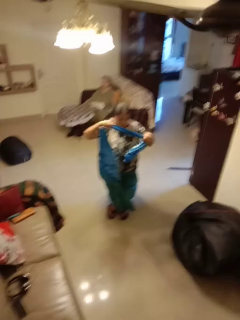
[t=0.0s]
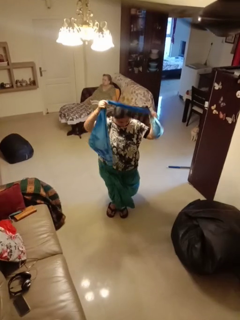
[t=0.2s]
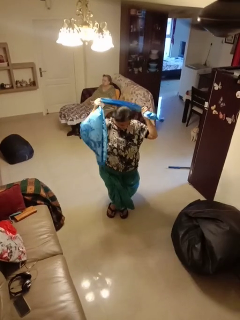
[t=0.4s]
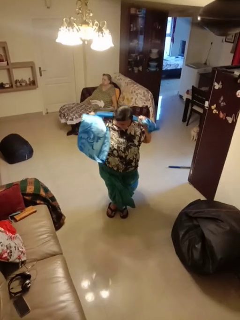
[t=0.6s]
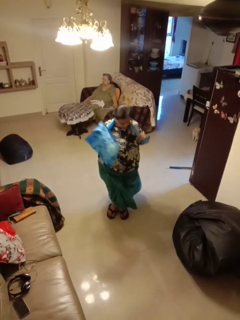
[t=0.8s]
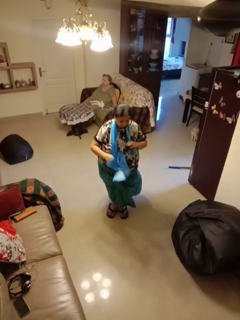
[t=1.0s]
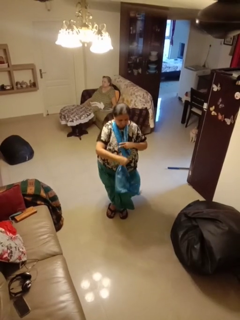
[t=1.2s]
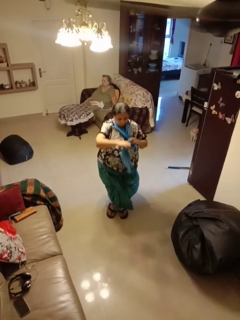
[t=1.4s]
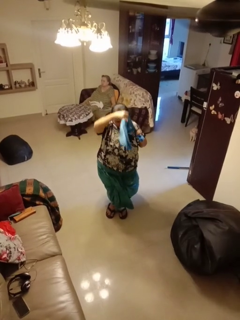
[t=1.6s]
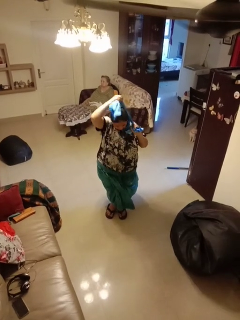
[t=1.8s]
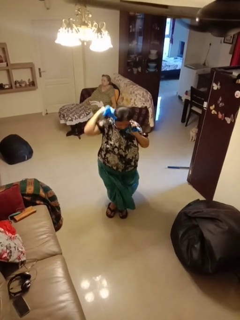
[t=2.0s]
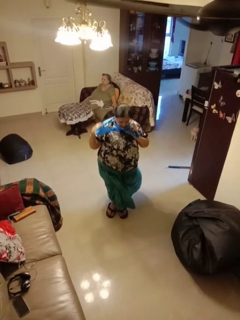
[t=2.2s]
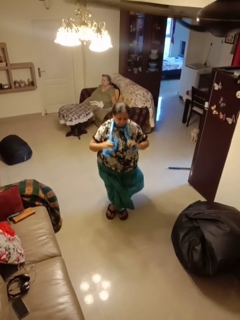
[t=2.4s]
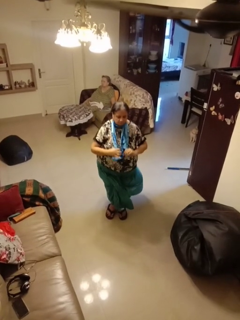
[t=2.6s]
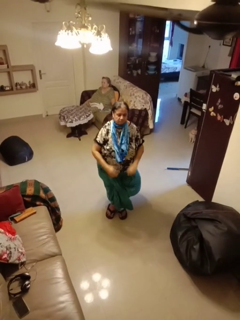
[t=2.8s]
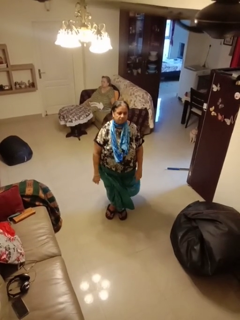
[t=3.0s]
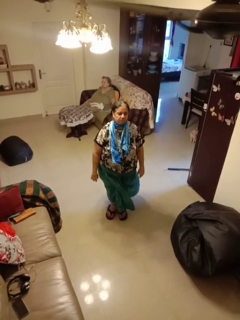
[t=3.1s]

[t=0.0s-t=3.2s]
person puts on scarf

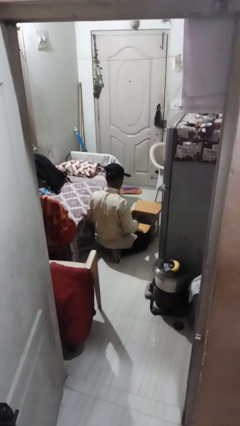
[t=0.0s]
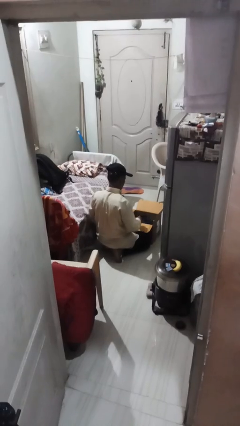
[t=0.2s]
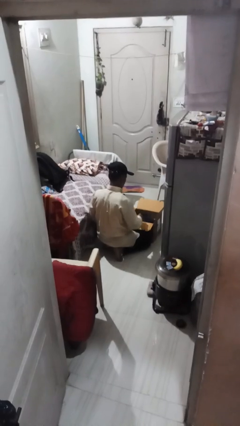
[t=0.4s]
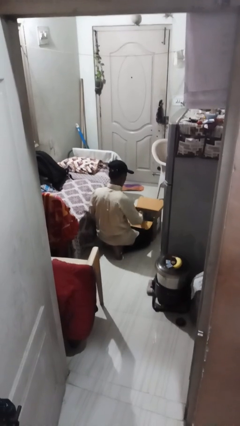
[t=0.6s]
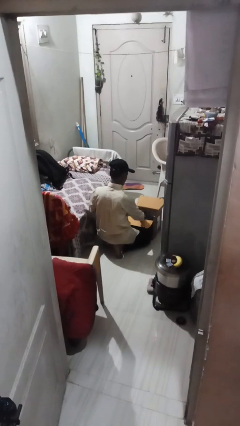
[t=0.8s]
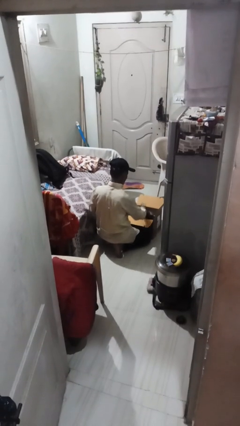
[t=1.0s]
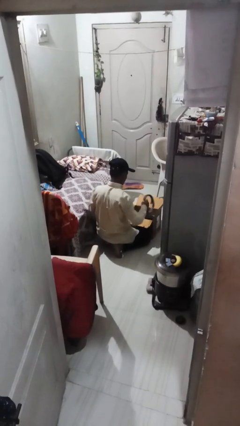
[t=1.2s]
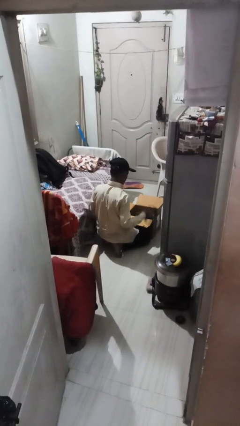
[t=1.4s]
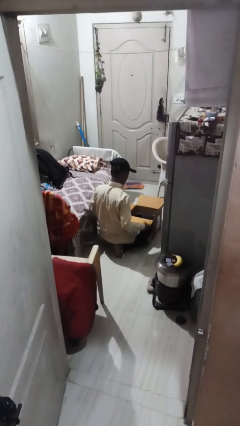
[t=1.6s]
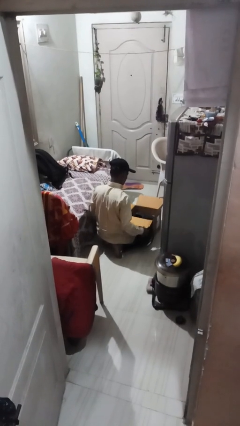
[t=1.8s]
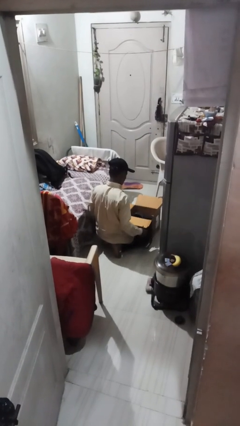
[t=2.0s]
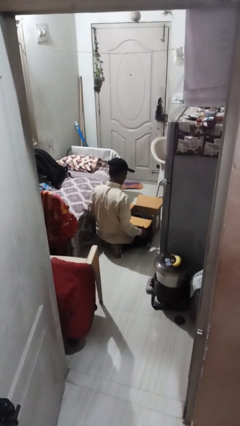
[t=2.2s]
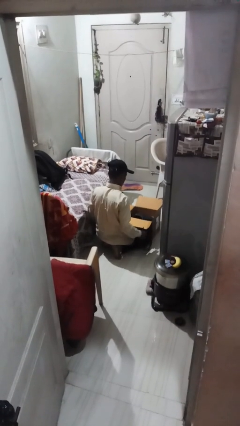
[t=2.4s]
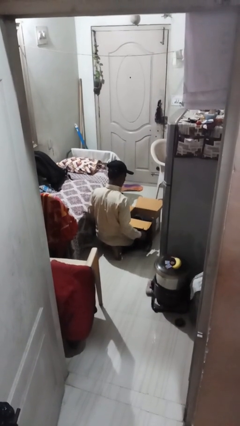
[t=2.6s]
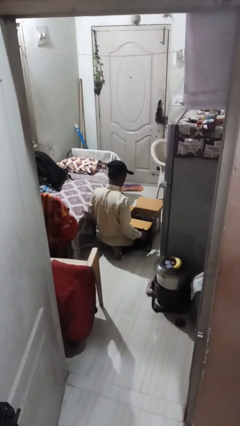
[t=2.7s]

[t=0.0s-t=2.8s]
person takes object from box

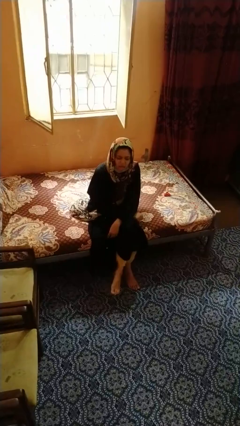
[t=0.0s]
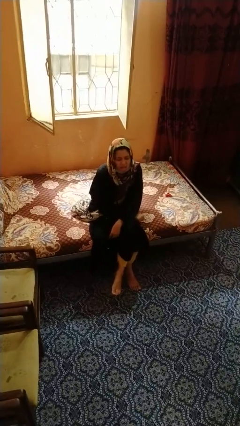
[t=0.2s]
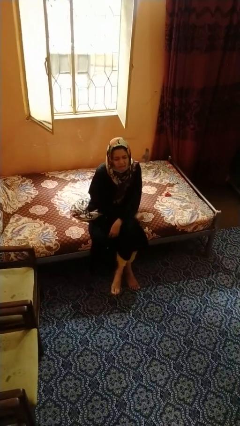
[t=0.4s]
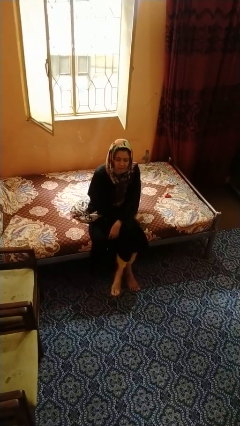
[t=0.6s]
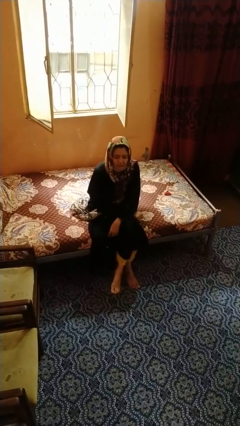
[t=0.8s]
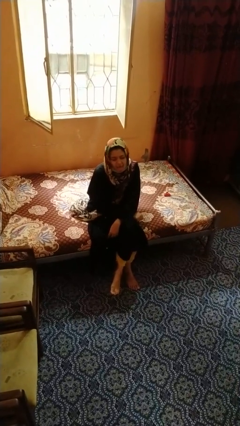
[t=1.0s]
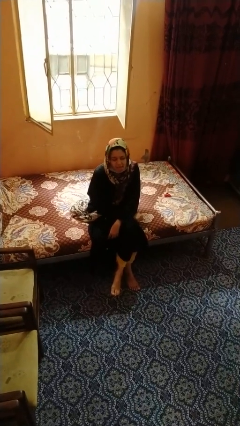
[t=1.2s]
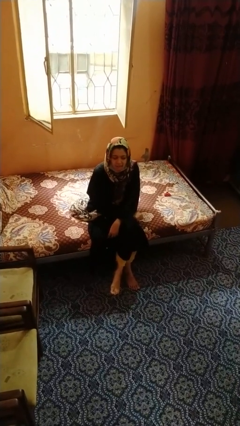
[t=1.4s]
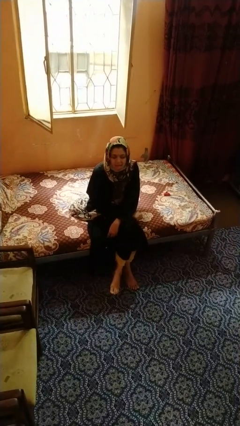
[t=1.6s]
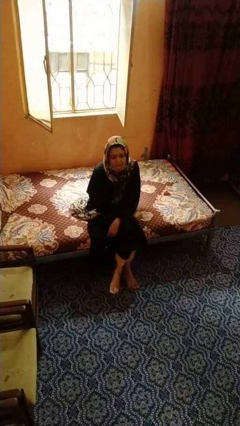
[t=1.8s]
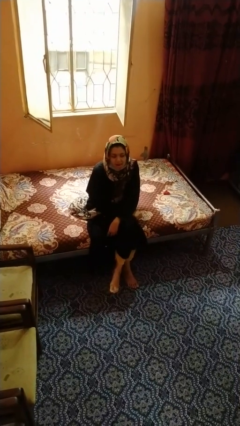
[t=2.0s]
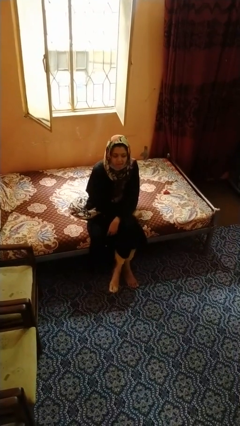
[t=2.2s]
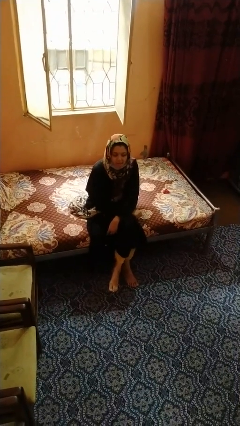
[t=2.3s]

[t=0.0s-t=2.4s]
person sticks out tongue

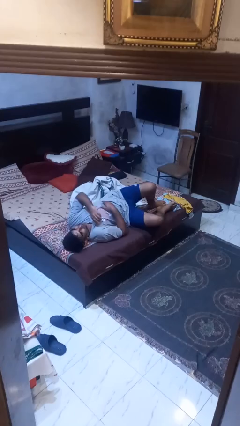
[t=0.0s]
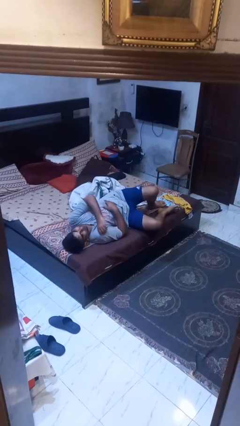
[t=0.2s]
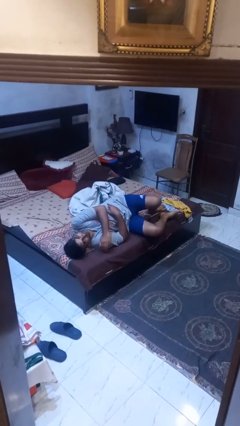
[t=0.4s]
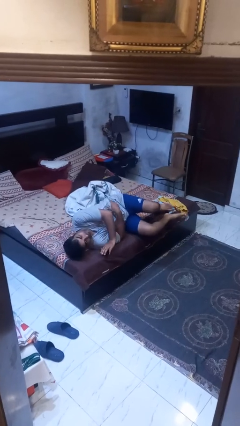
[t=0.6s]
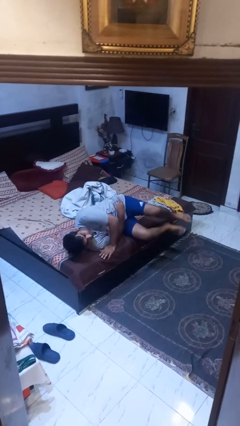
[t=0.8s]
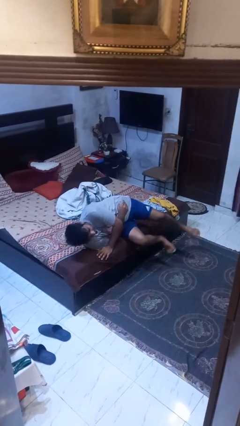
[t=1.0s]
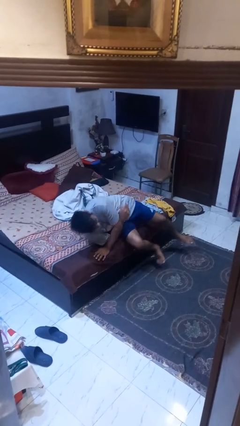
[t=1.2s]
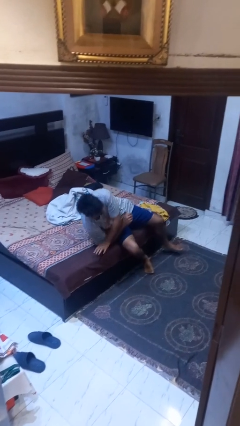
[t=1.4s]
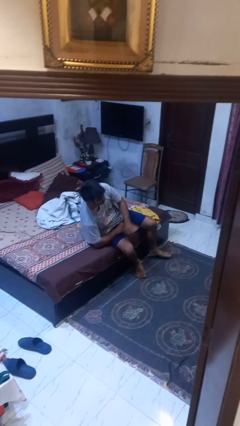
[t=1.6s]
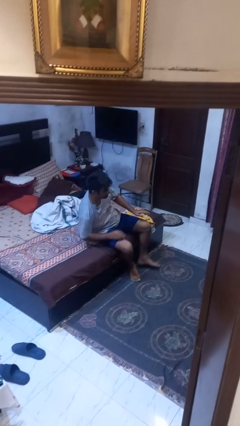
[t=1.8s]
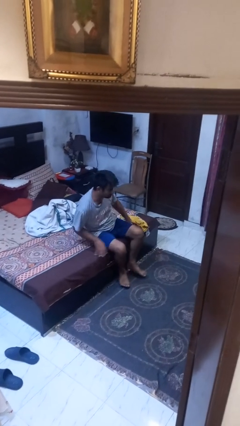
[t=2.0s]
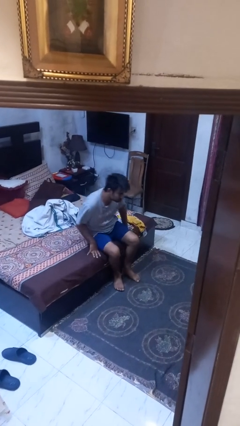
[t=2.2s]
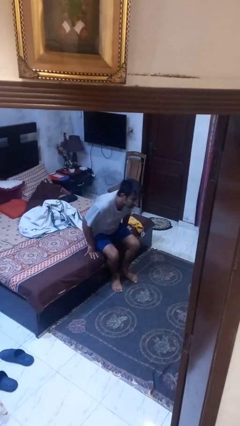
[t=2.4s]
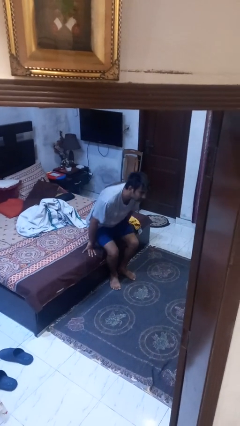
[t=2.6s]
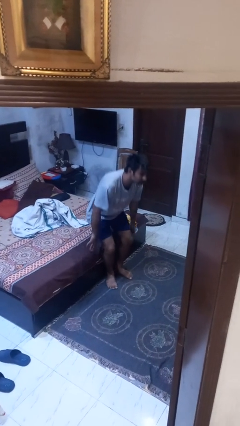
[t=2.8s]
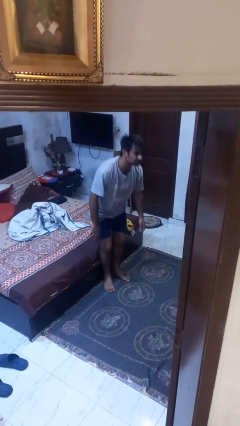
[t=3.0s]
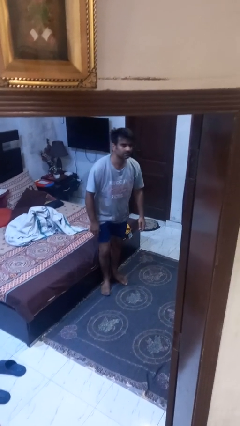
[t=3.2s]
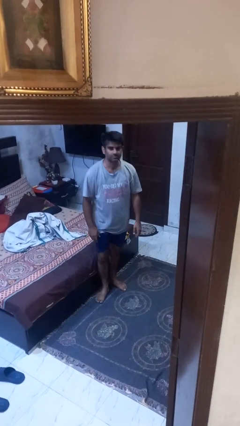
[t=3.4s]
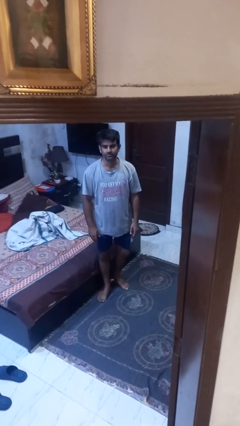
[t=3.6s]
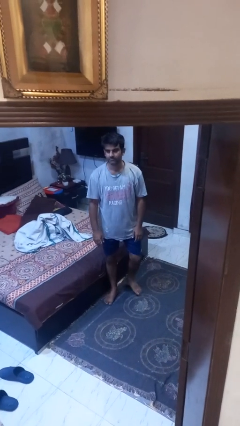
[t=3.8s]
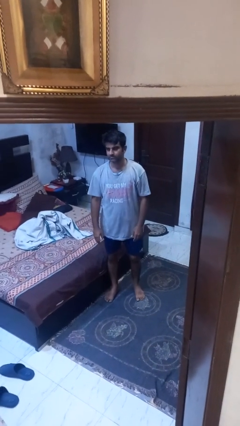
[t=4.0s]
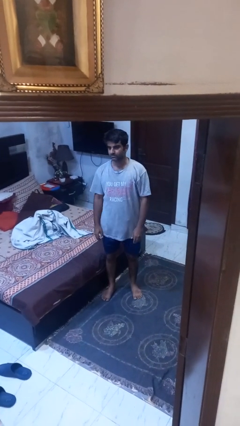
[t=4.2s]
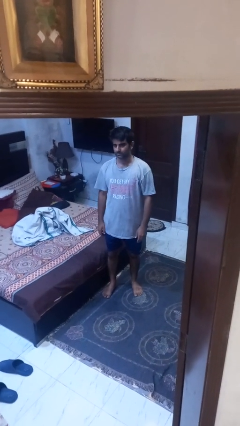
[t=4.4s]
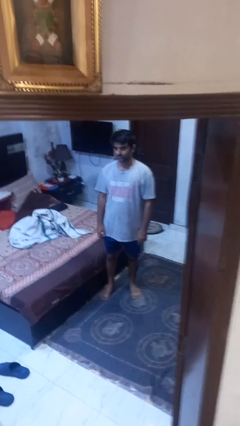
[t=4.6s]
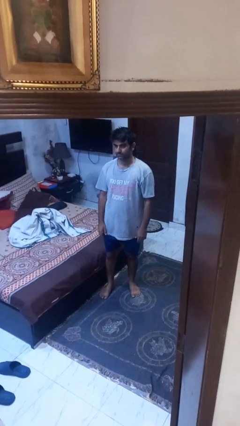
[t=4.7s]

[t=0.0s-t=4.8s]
person stands up

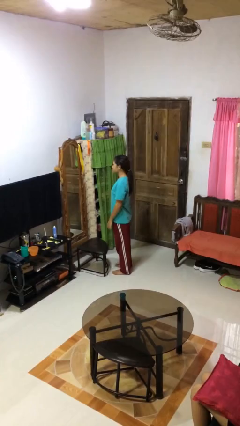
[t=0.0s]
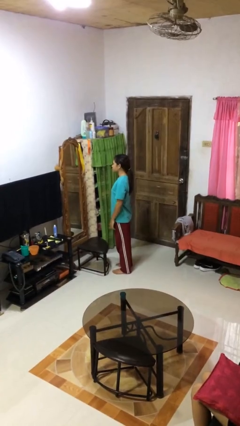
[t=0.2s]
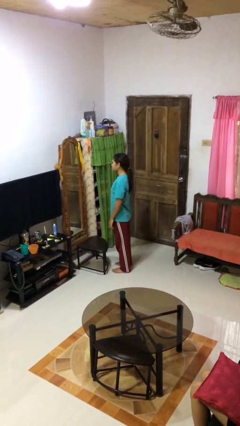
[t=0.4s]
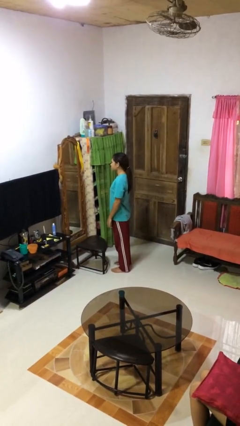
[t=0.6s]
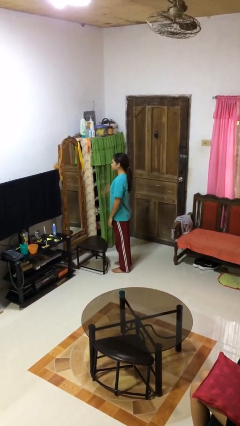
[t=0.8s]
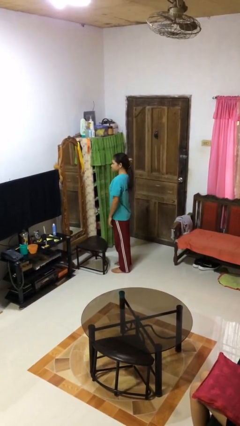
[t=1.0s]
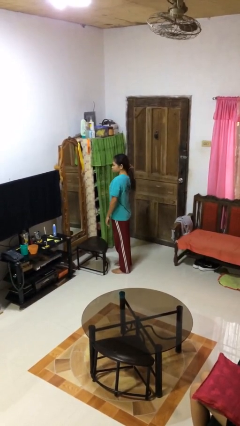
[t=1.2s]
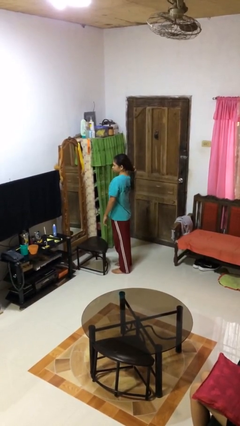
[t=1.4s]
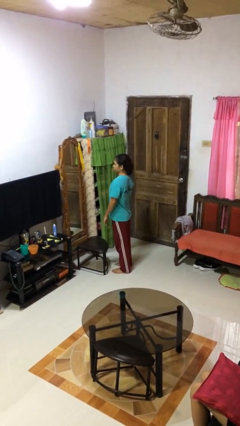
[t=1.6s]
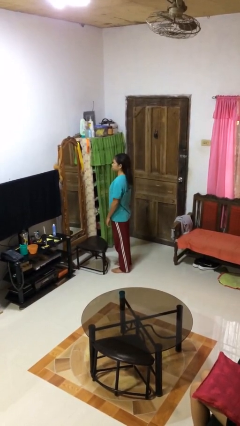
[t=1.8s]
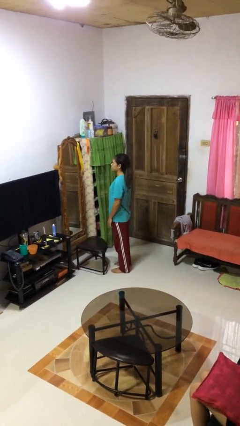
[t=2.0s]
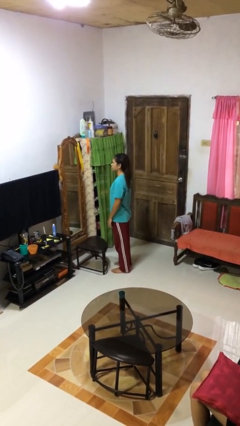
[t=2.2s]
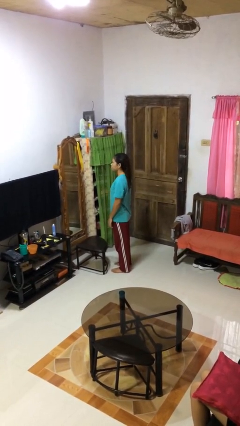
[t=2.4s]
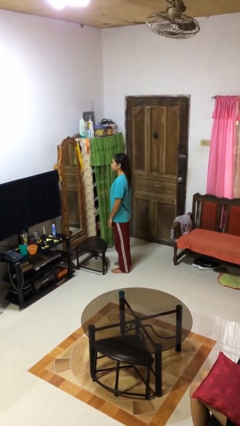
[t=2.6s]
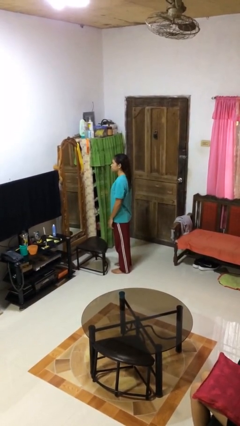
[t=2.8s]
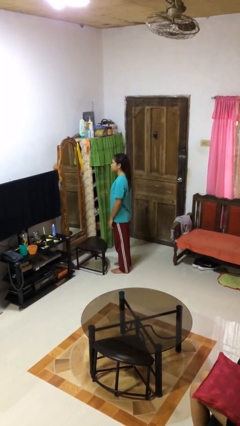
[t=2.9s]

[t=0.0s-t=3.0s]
person takes off hairtie

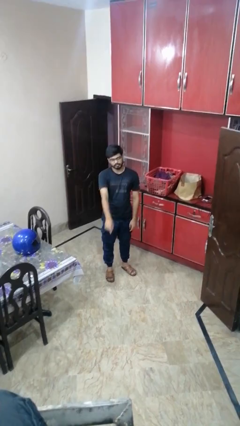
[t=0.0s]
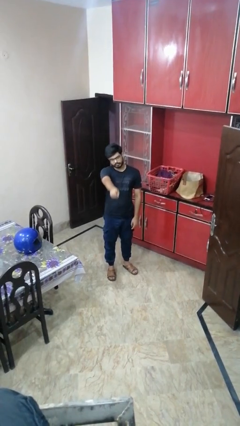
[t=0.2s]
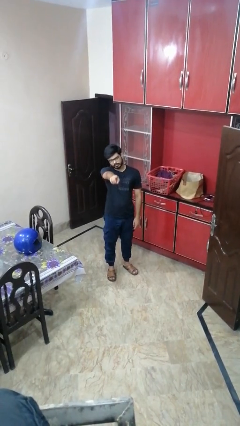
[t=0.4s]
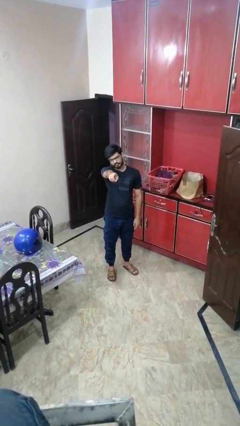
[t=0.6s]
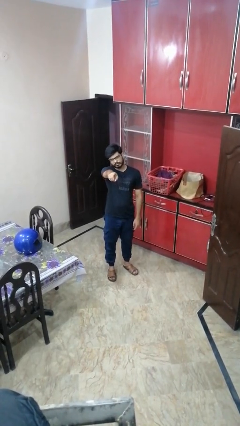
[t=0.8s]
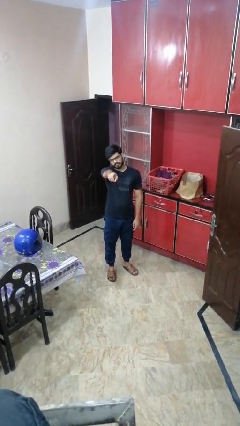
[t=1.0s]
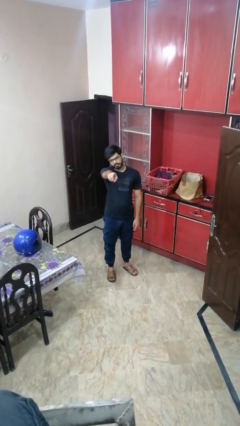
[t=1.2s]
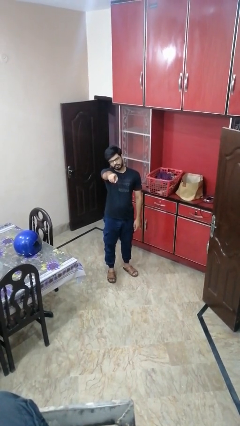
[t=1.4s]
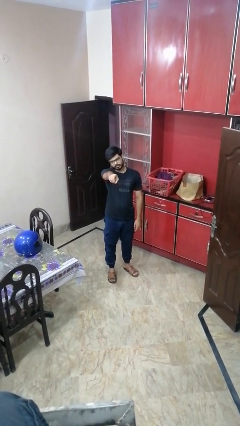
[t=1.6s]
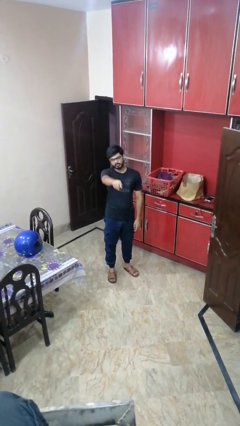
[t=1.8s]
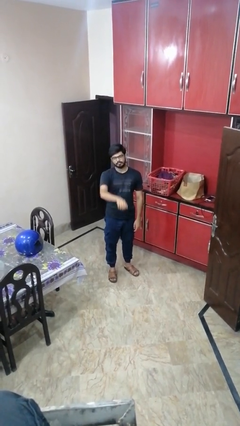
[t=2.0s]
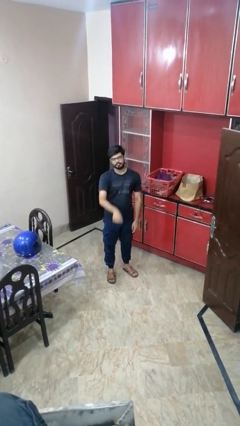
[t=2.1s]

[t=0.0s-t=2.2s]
person points at person
